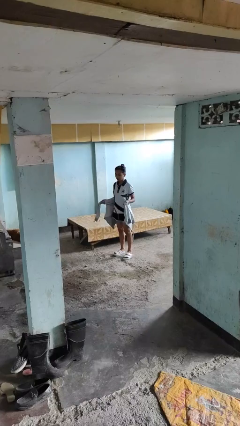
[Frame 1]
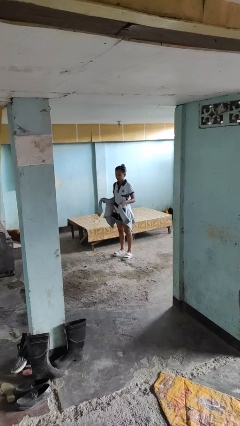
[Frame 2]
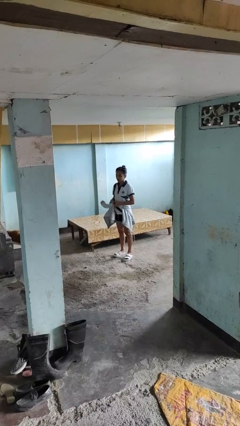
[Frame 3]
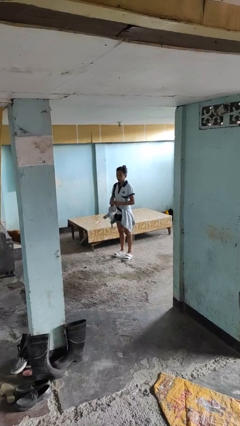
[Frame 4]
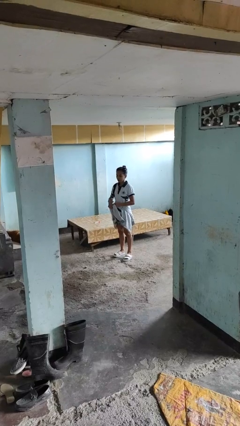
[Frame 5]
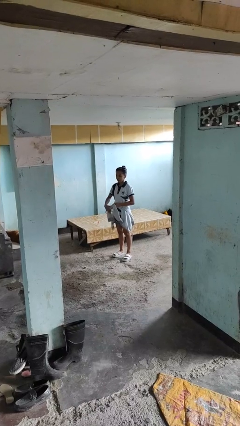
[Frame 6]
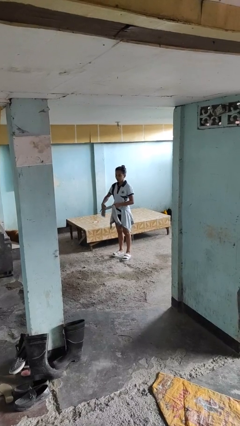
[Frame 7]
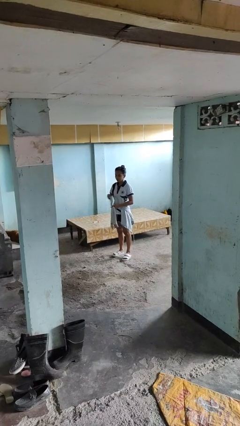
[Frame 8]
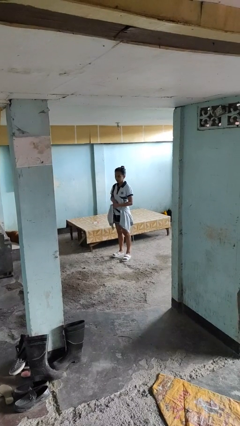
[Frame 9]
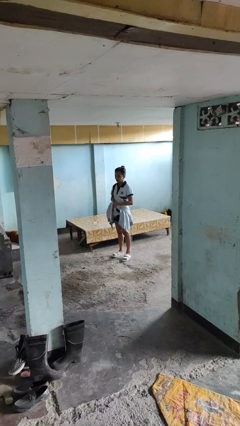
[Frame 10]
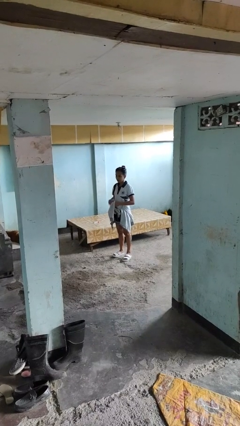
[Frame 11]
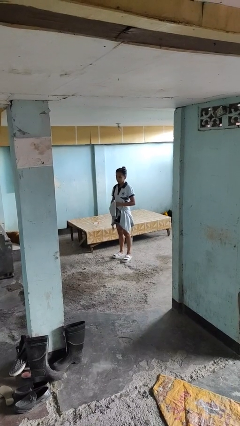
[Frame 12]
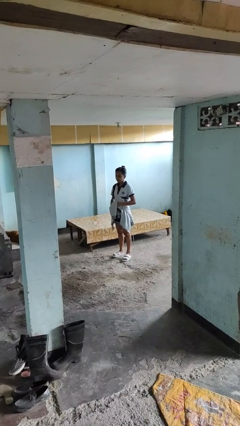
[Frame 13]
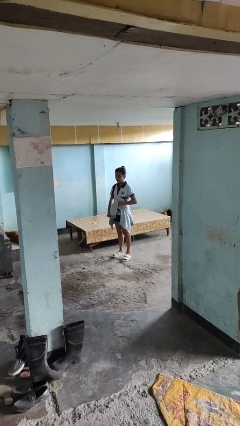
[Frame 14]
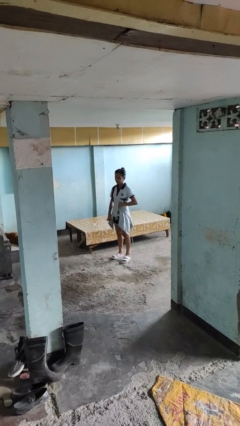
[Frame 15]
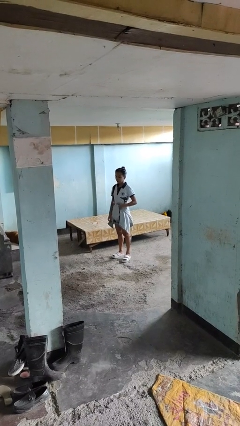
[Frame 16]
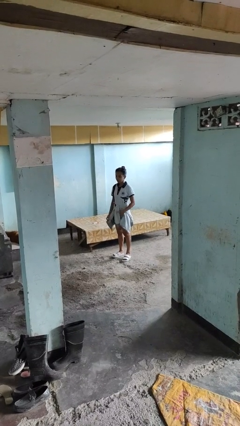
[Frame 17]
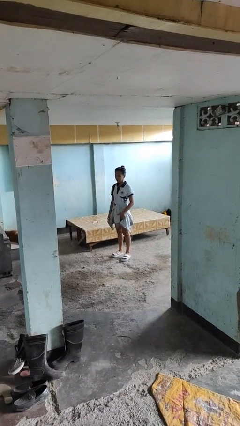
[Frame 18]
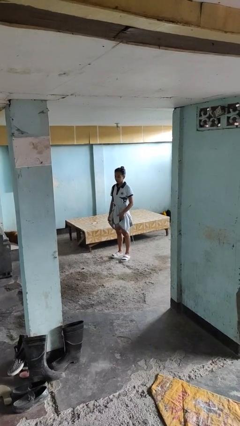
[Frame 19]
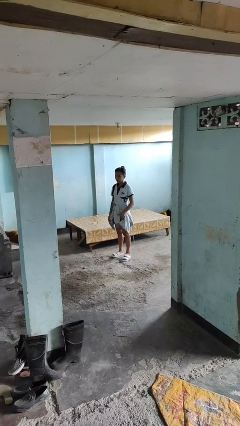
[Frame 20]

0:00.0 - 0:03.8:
person ties jacket around waist

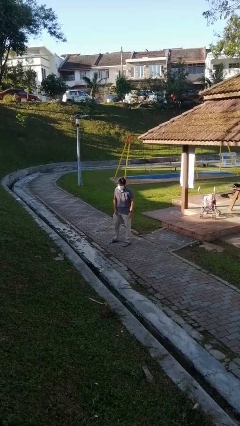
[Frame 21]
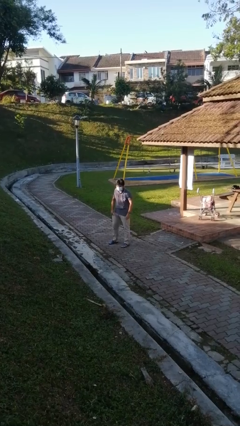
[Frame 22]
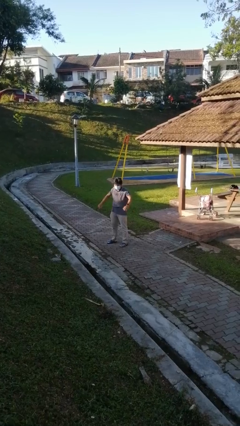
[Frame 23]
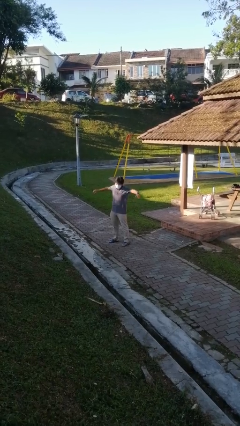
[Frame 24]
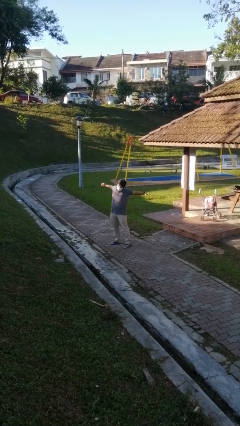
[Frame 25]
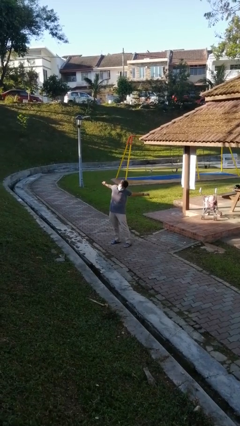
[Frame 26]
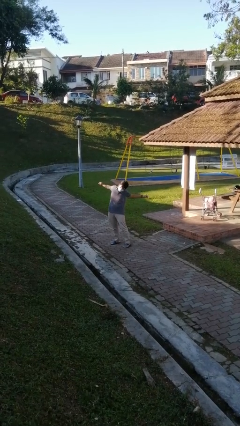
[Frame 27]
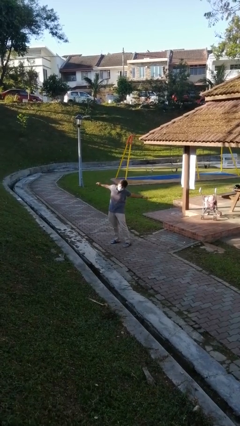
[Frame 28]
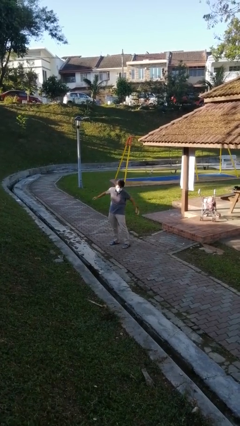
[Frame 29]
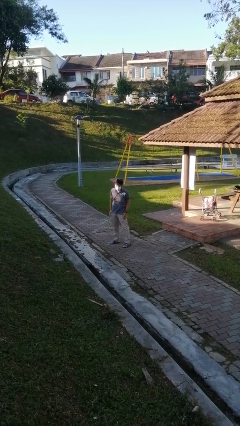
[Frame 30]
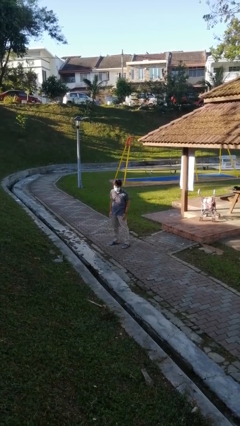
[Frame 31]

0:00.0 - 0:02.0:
person stretches arms to side

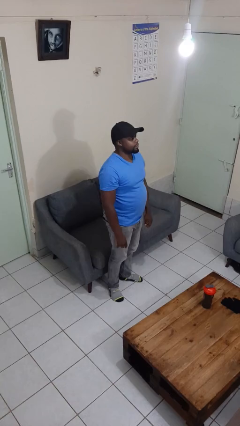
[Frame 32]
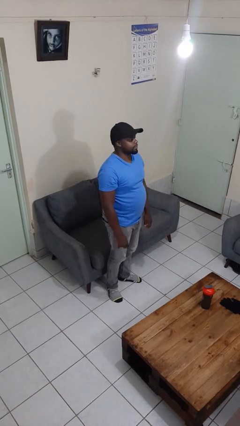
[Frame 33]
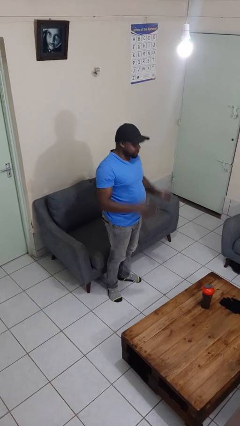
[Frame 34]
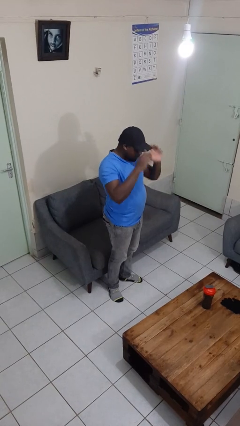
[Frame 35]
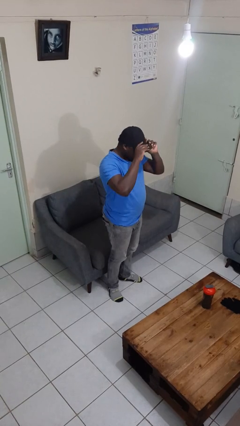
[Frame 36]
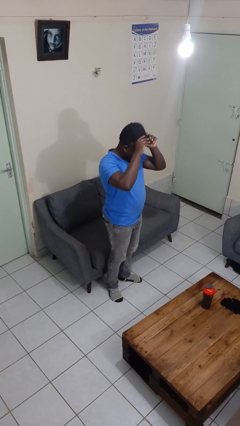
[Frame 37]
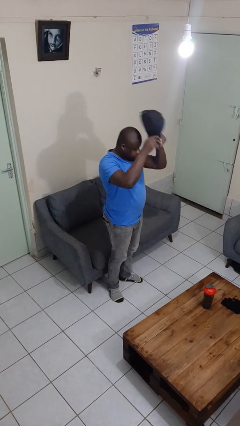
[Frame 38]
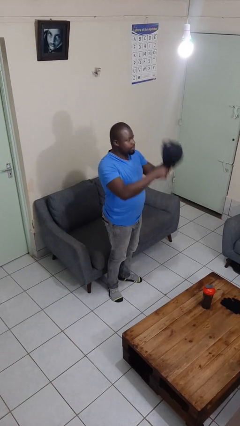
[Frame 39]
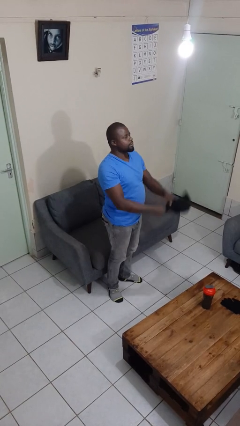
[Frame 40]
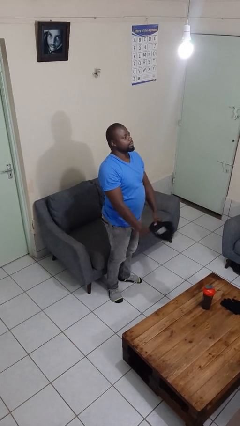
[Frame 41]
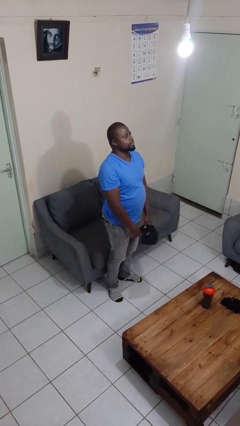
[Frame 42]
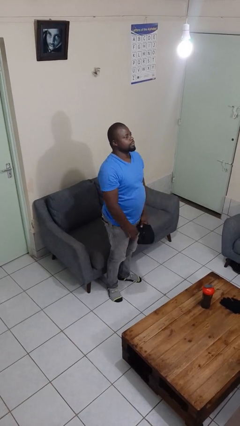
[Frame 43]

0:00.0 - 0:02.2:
person takes off hat

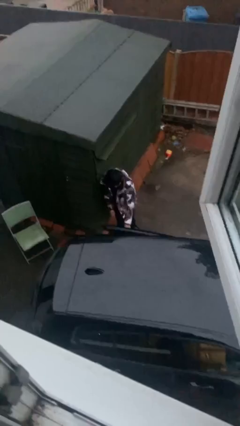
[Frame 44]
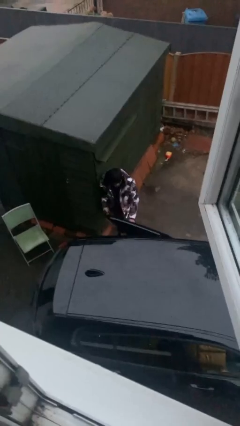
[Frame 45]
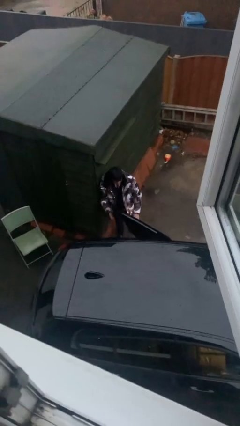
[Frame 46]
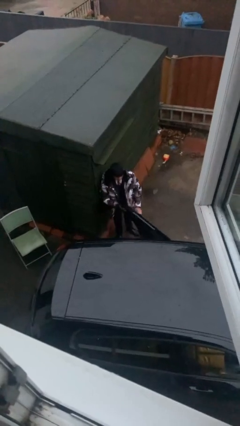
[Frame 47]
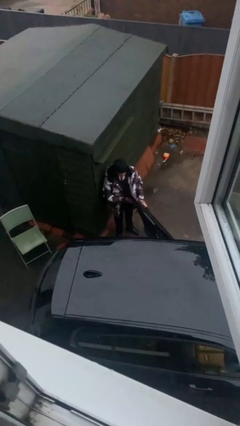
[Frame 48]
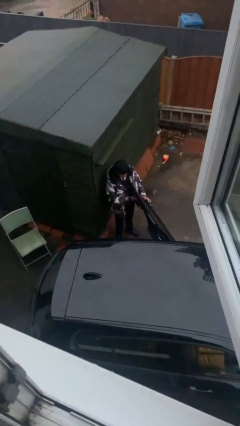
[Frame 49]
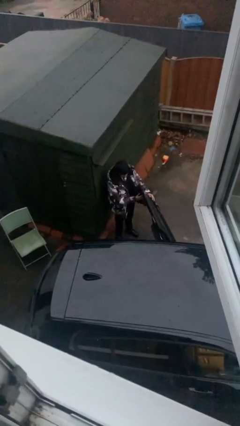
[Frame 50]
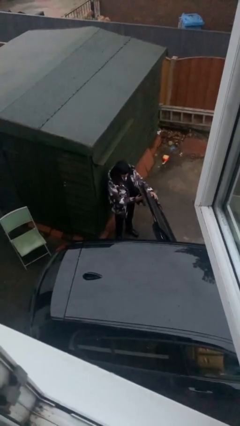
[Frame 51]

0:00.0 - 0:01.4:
person opens car door

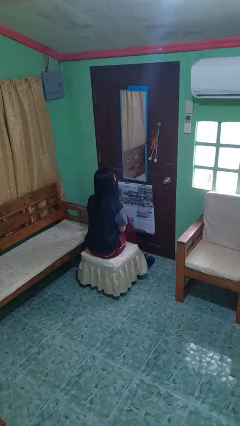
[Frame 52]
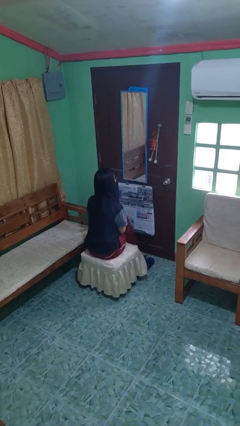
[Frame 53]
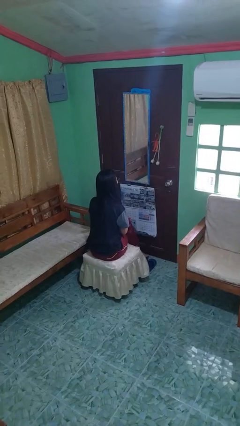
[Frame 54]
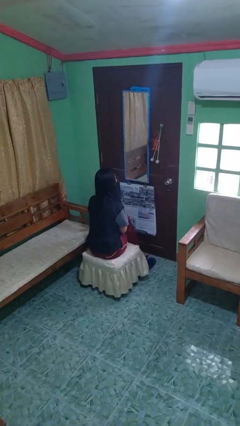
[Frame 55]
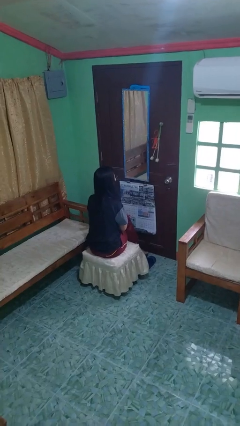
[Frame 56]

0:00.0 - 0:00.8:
person gestures swipe left

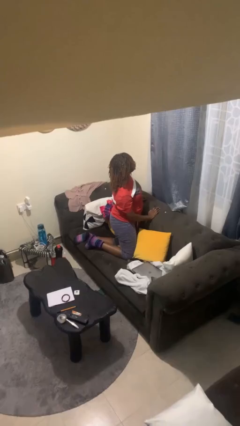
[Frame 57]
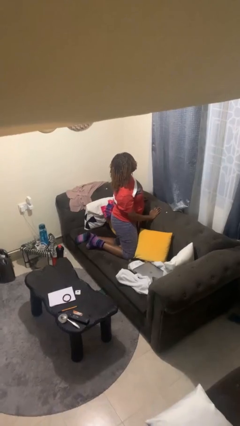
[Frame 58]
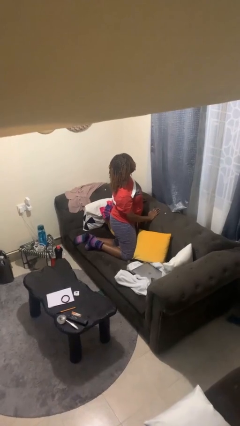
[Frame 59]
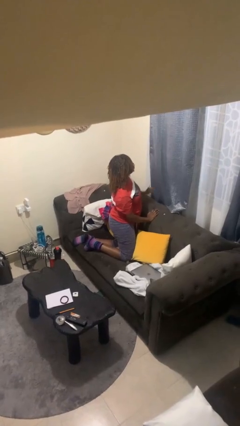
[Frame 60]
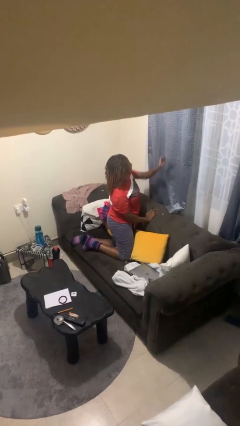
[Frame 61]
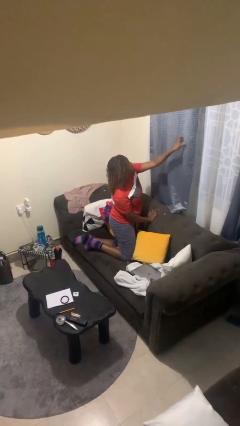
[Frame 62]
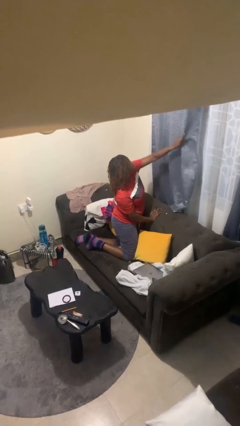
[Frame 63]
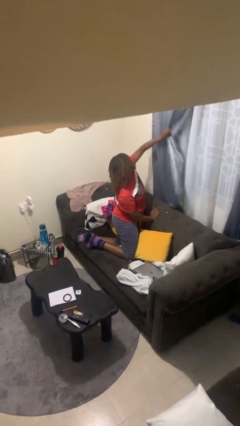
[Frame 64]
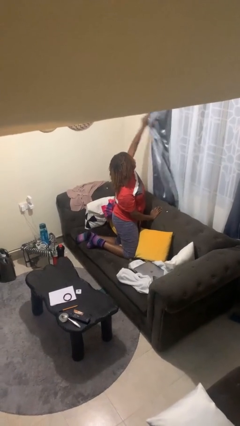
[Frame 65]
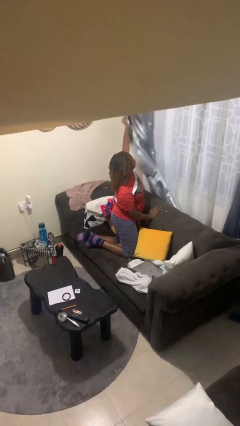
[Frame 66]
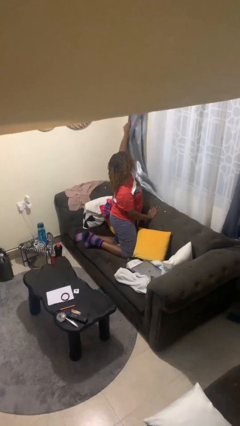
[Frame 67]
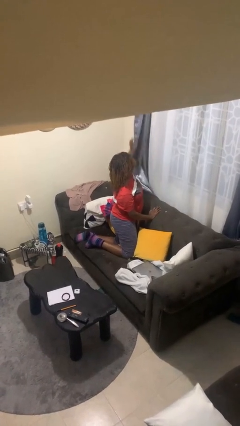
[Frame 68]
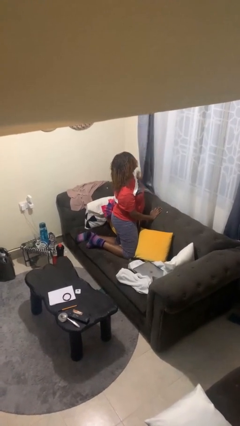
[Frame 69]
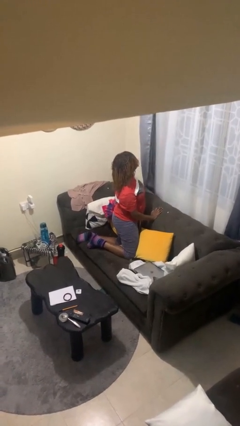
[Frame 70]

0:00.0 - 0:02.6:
person opens curtains

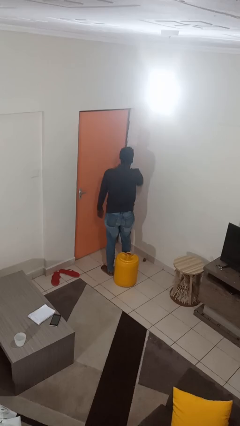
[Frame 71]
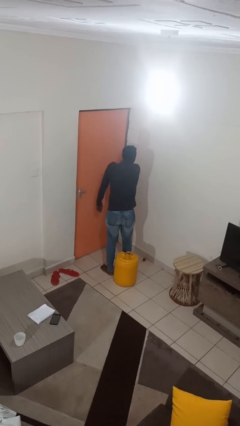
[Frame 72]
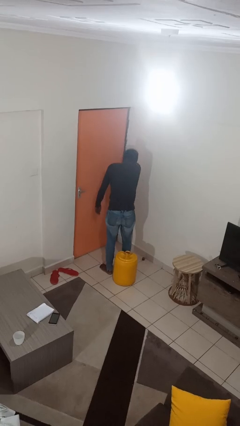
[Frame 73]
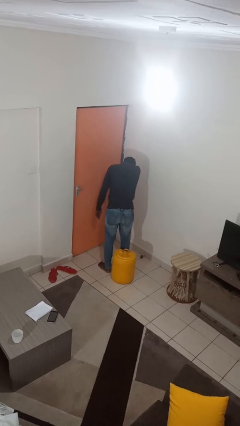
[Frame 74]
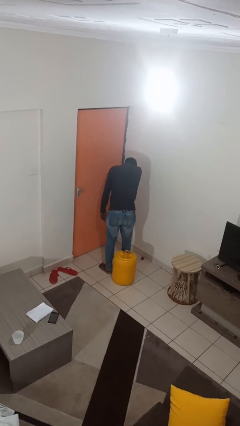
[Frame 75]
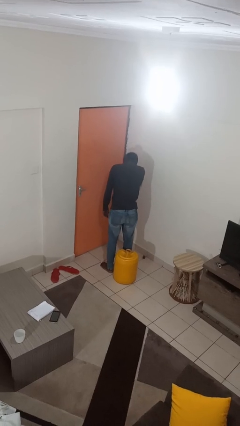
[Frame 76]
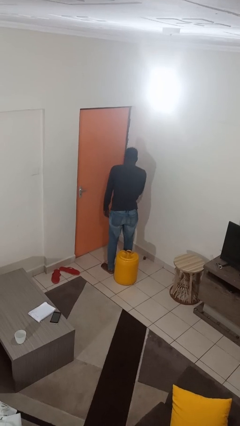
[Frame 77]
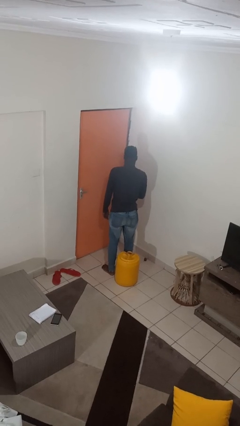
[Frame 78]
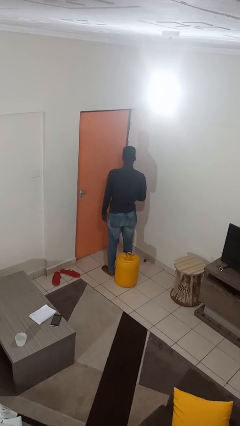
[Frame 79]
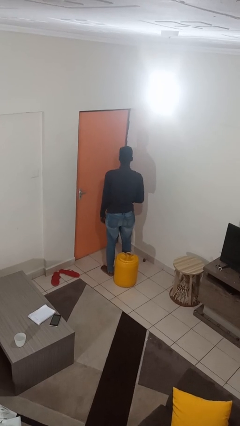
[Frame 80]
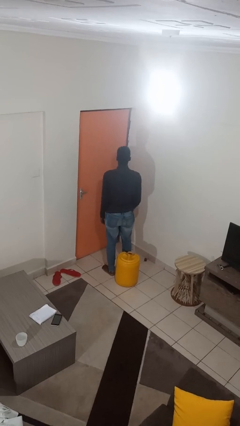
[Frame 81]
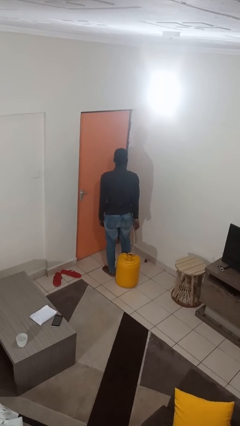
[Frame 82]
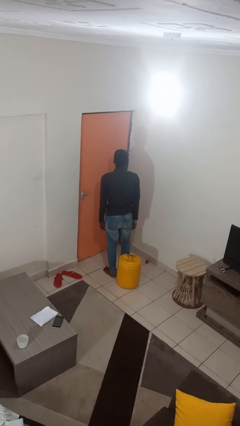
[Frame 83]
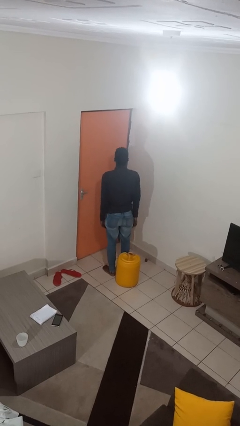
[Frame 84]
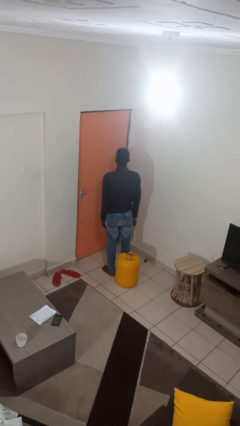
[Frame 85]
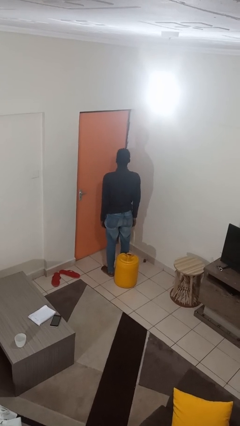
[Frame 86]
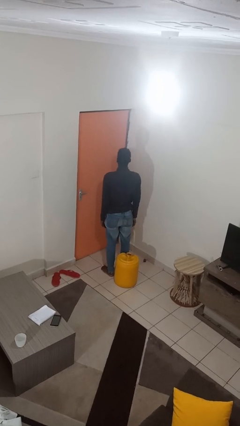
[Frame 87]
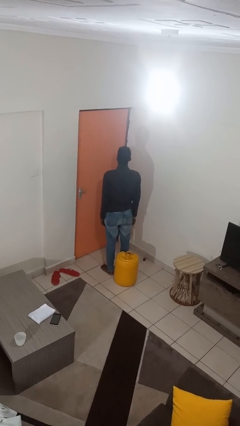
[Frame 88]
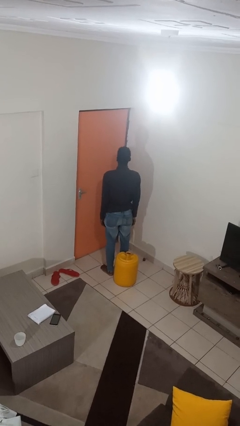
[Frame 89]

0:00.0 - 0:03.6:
person sneezes into arm

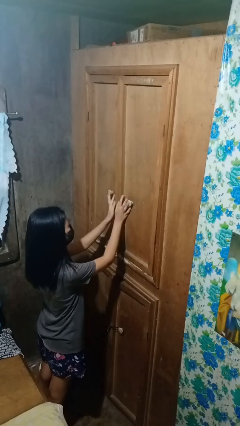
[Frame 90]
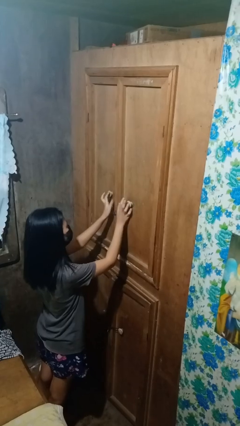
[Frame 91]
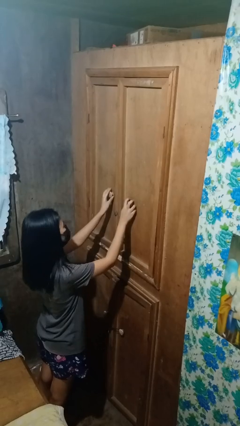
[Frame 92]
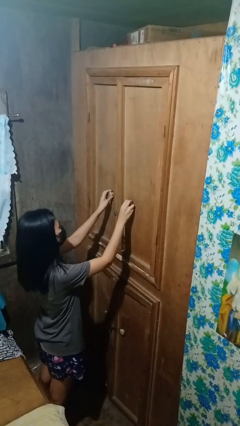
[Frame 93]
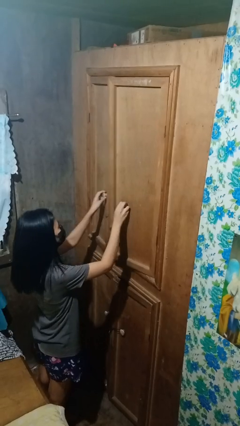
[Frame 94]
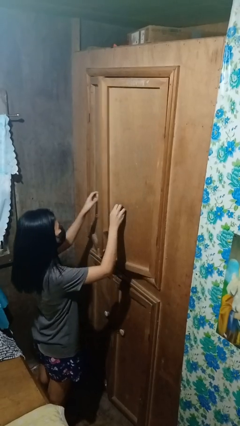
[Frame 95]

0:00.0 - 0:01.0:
person opens closet door
